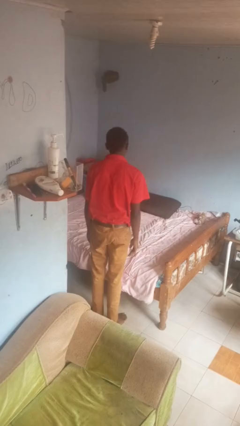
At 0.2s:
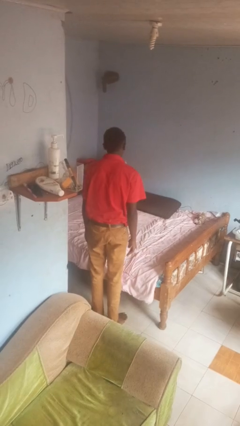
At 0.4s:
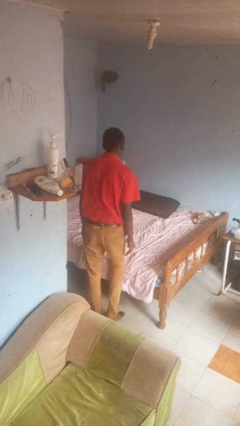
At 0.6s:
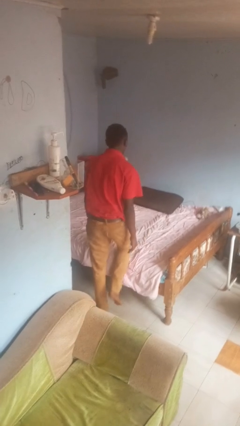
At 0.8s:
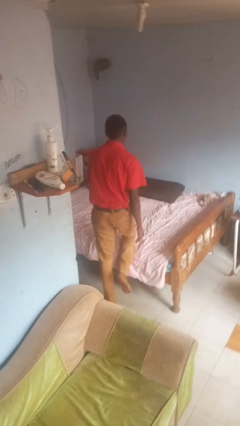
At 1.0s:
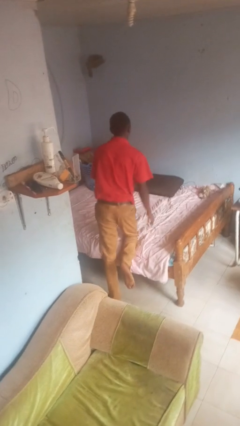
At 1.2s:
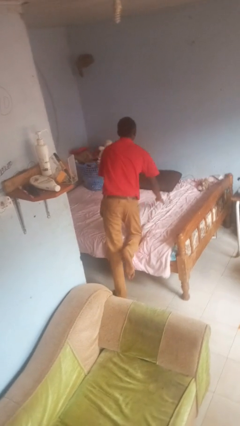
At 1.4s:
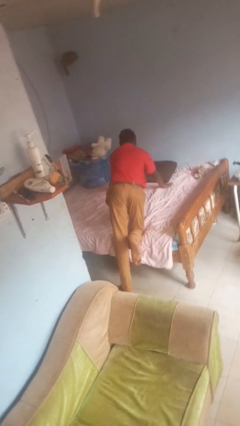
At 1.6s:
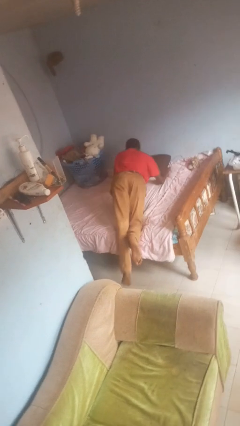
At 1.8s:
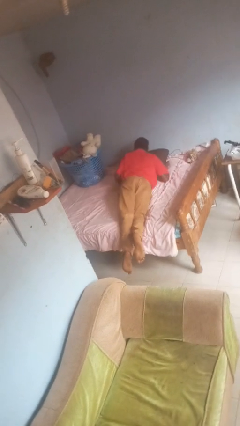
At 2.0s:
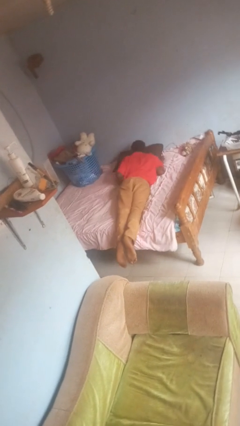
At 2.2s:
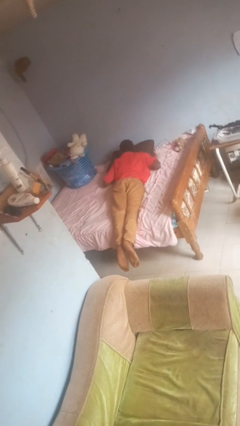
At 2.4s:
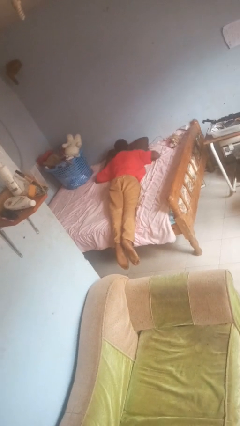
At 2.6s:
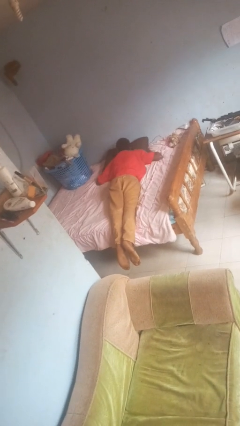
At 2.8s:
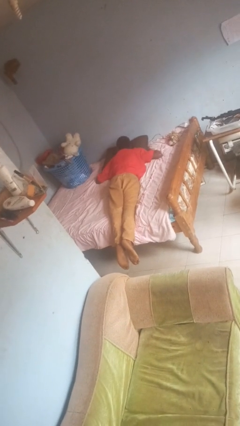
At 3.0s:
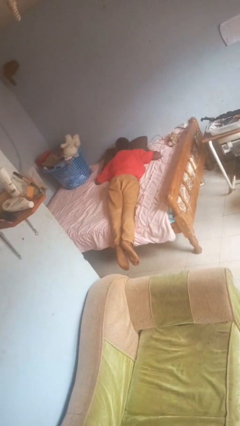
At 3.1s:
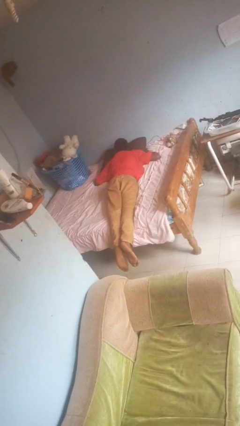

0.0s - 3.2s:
person lies down on bed

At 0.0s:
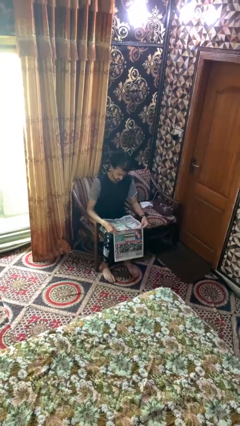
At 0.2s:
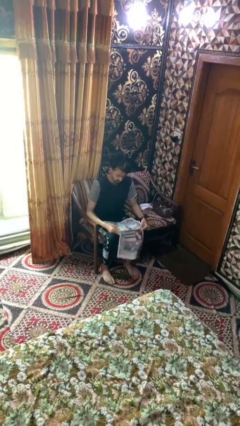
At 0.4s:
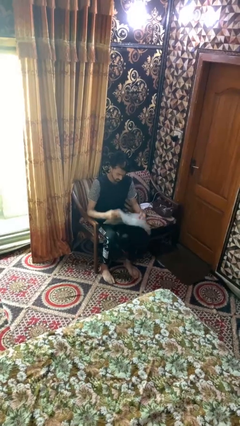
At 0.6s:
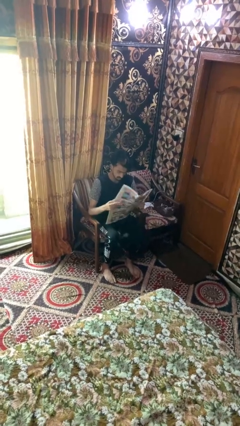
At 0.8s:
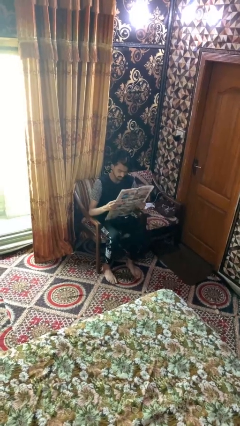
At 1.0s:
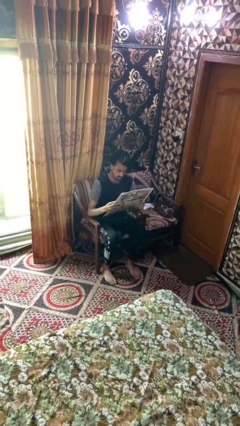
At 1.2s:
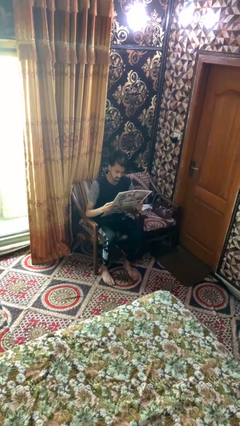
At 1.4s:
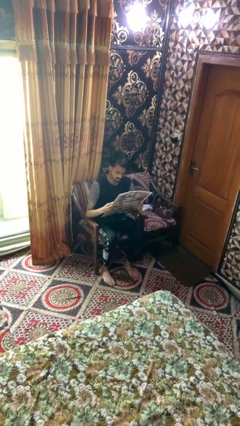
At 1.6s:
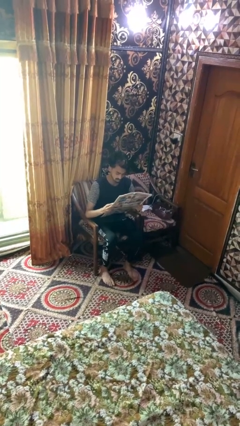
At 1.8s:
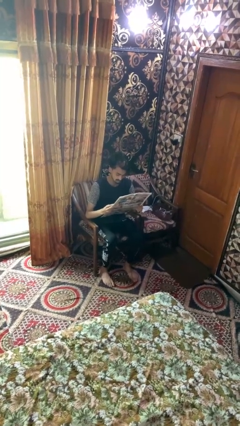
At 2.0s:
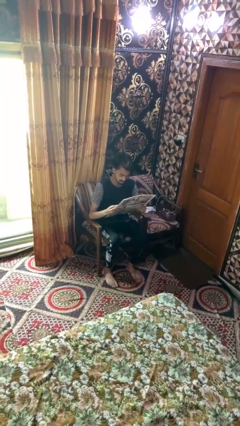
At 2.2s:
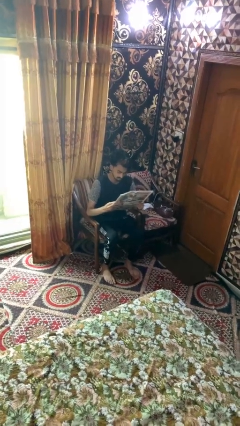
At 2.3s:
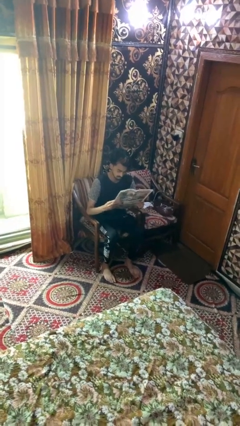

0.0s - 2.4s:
person reads newspaper

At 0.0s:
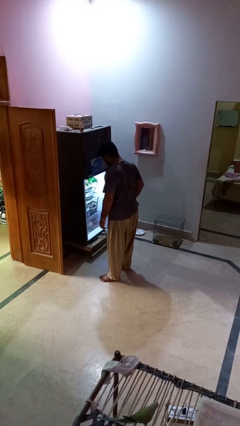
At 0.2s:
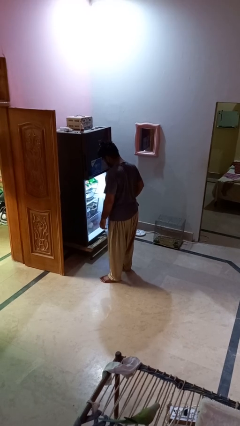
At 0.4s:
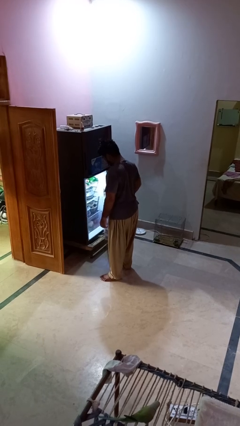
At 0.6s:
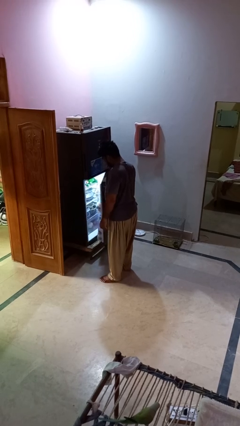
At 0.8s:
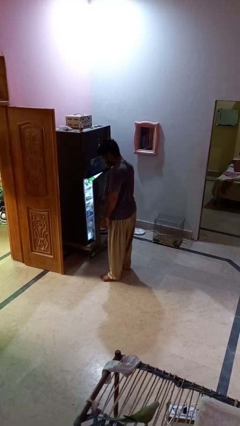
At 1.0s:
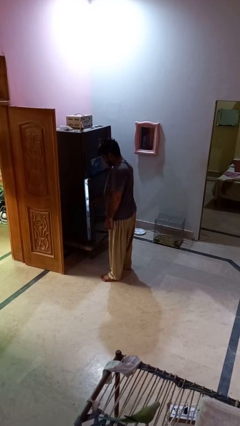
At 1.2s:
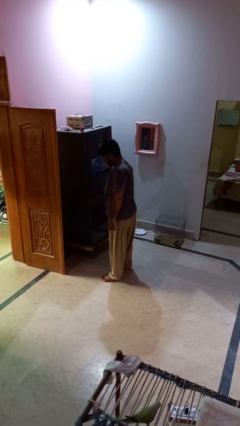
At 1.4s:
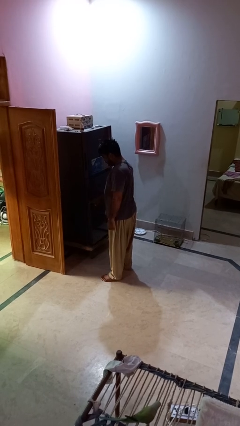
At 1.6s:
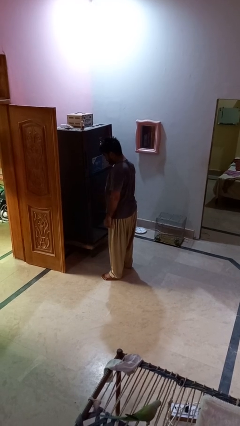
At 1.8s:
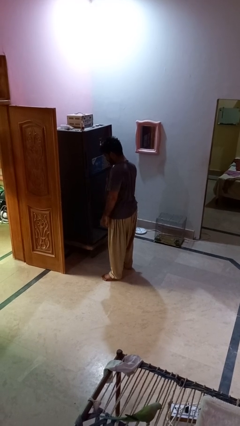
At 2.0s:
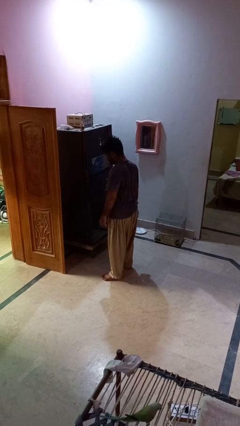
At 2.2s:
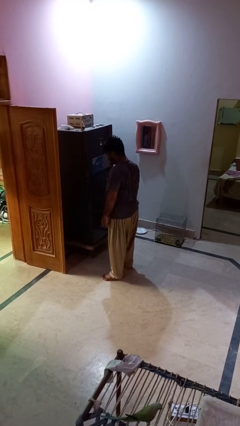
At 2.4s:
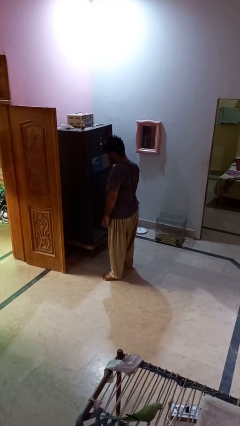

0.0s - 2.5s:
person closes refrigerator

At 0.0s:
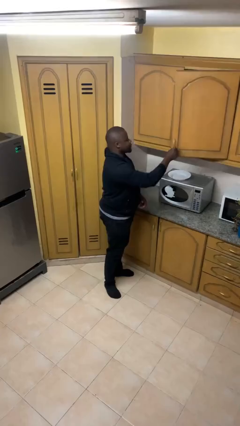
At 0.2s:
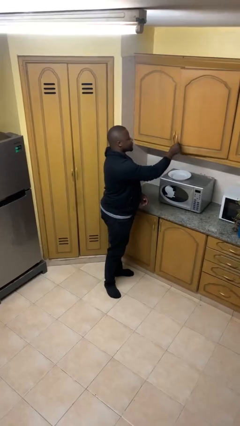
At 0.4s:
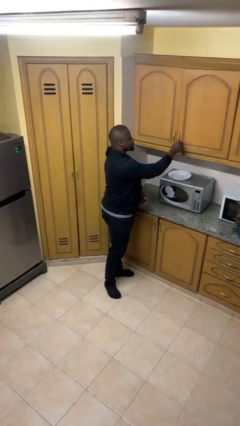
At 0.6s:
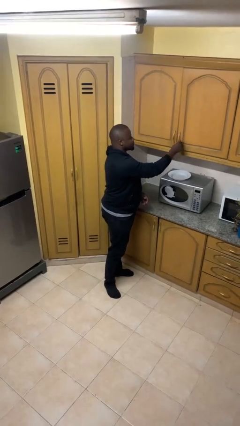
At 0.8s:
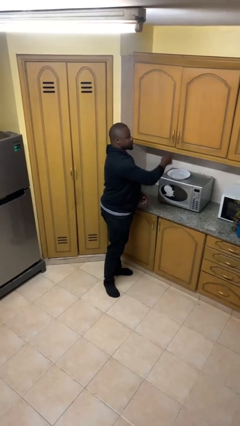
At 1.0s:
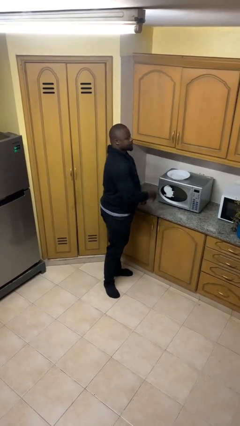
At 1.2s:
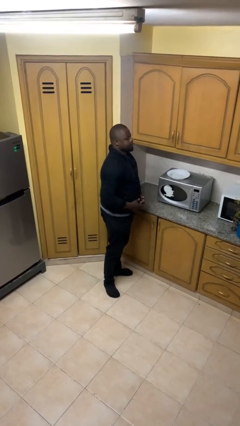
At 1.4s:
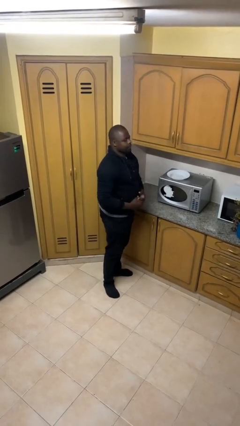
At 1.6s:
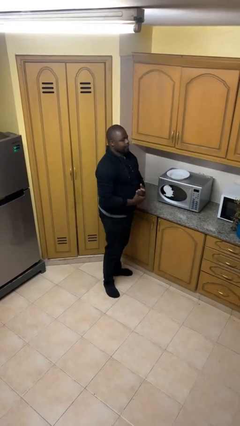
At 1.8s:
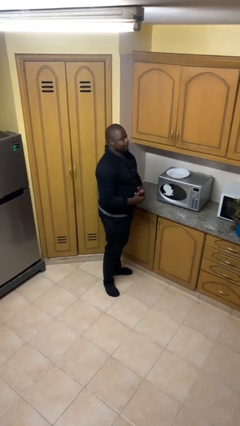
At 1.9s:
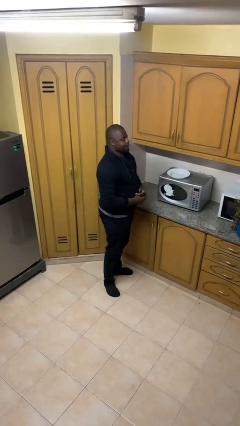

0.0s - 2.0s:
person closes cabinet

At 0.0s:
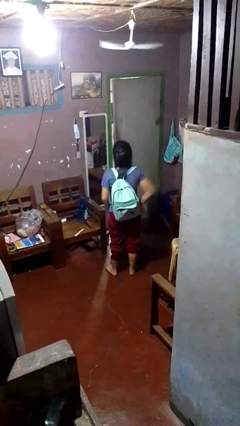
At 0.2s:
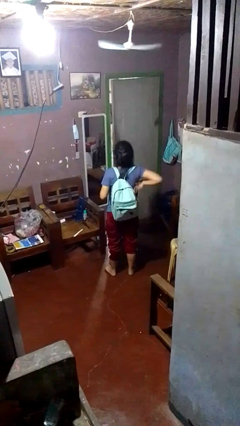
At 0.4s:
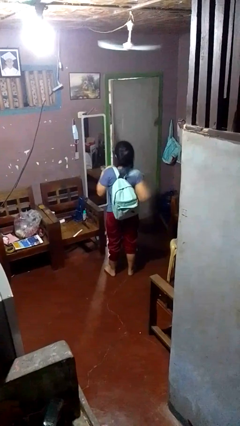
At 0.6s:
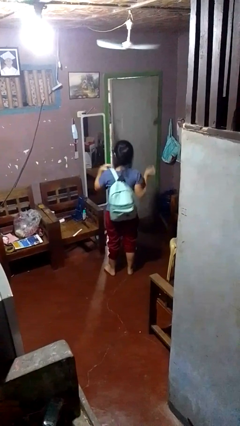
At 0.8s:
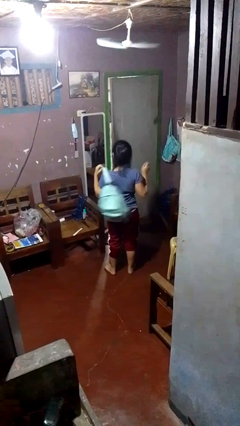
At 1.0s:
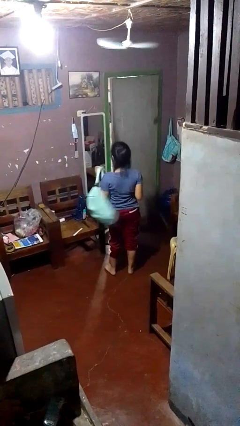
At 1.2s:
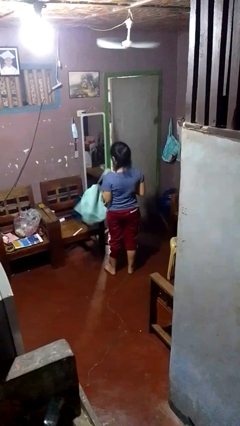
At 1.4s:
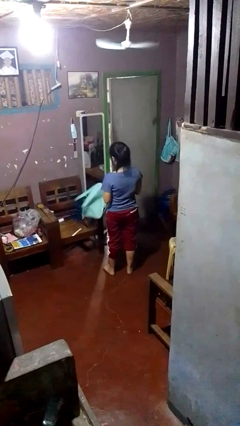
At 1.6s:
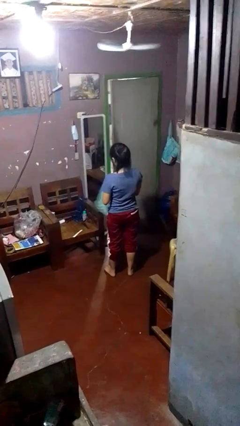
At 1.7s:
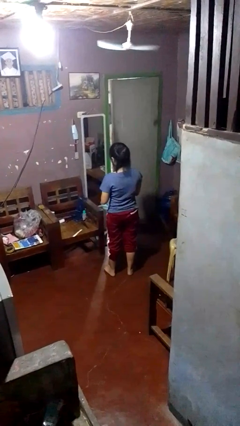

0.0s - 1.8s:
person takes off backpack

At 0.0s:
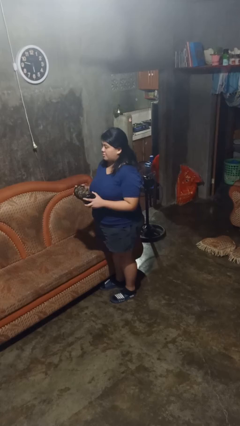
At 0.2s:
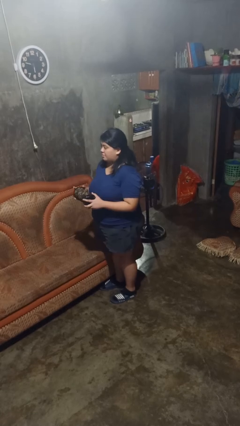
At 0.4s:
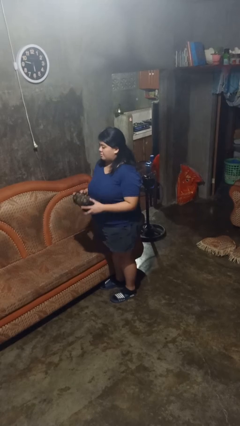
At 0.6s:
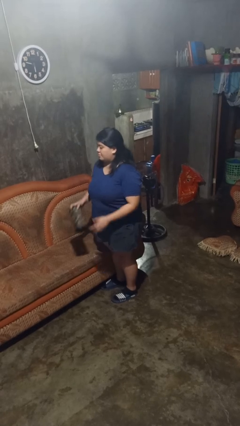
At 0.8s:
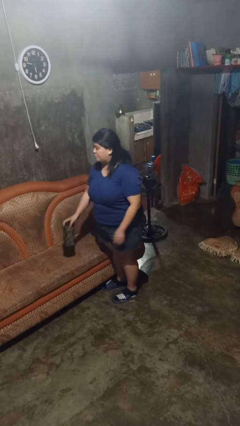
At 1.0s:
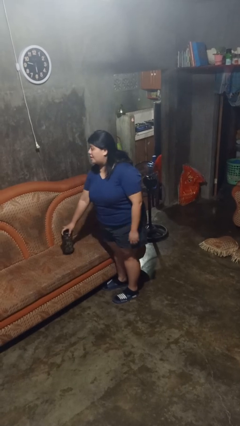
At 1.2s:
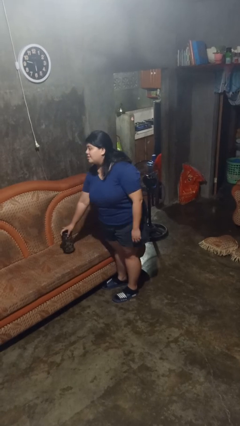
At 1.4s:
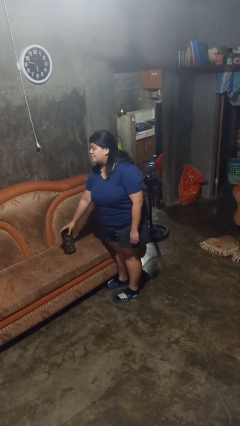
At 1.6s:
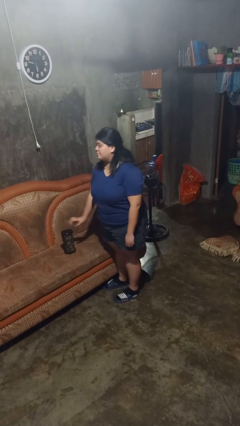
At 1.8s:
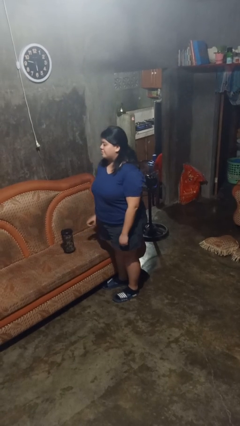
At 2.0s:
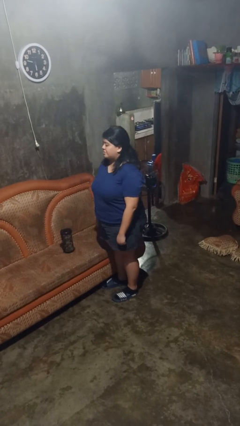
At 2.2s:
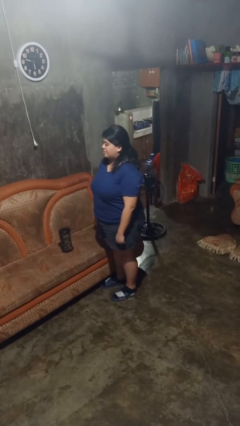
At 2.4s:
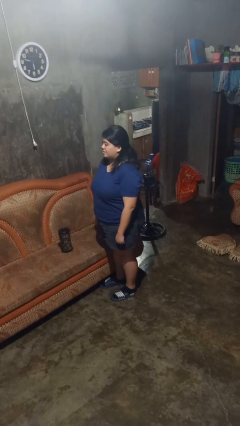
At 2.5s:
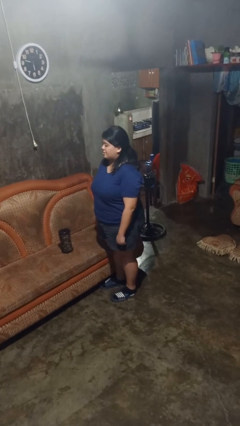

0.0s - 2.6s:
person puts down object on couch

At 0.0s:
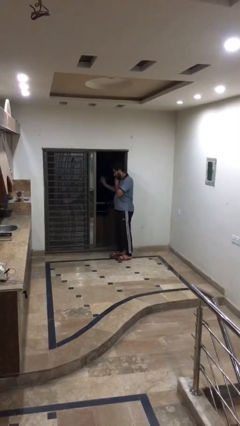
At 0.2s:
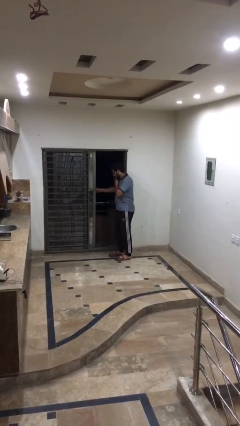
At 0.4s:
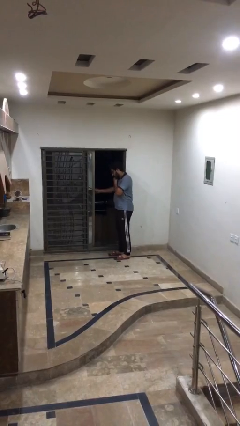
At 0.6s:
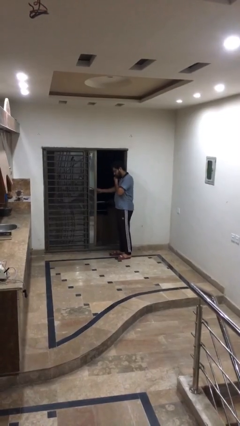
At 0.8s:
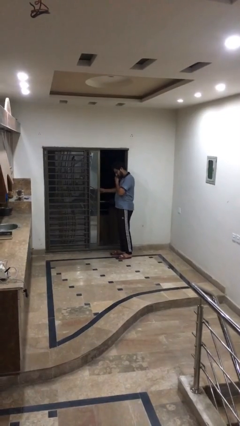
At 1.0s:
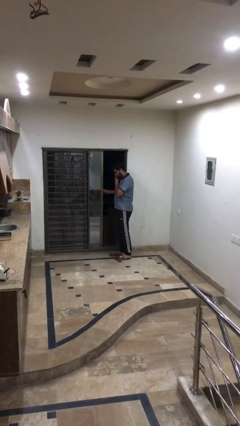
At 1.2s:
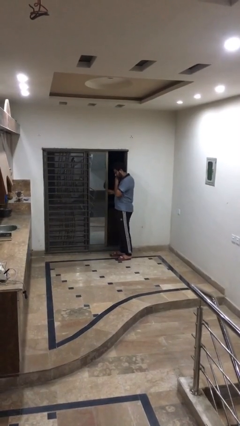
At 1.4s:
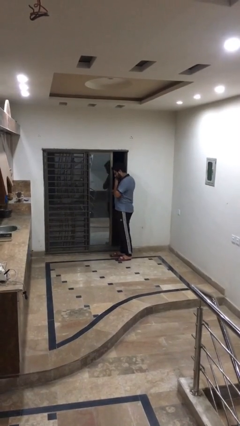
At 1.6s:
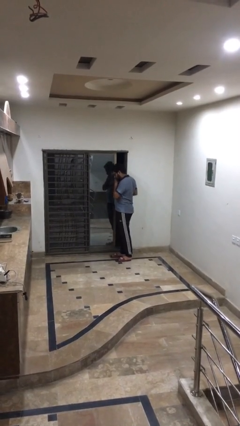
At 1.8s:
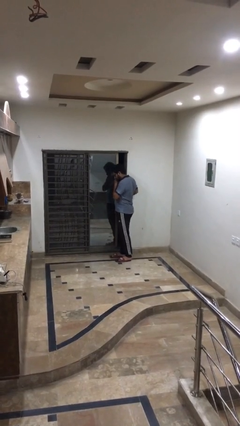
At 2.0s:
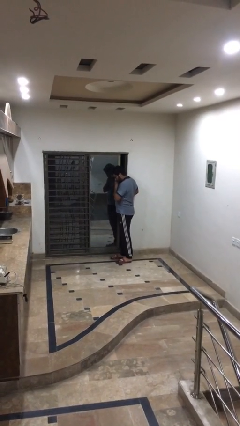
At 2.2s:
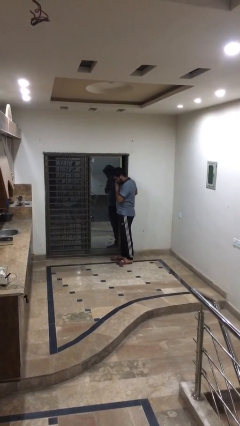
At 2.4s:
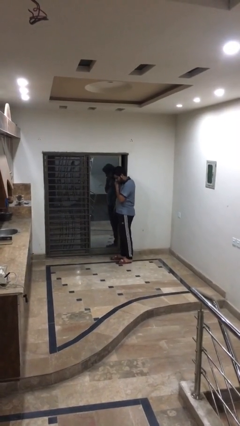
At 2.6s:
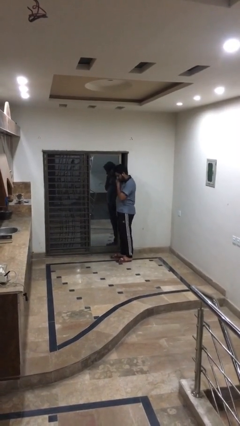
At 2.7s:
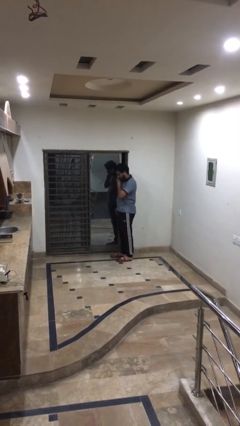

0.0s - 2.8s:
person closes facility door
